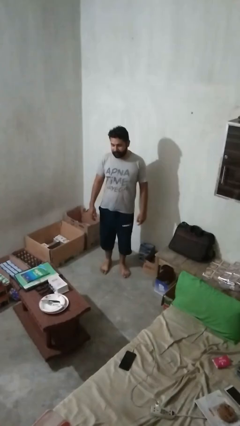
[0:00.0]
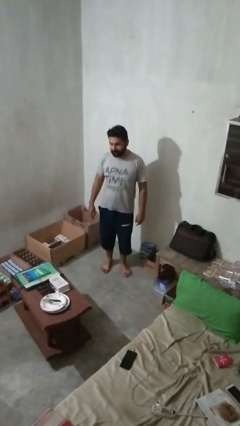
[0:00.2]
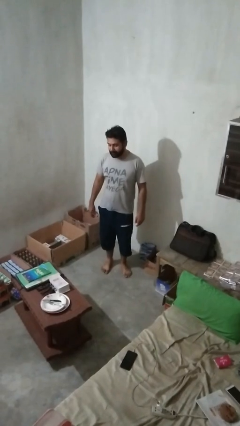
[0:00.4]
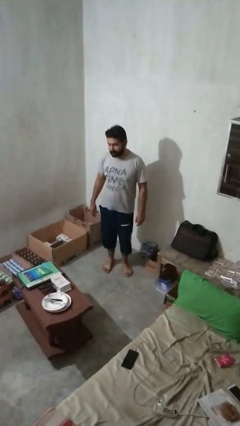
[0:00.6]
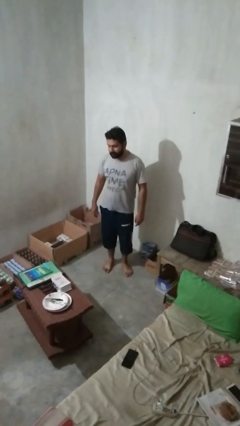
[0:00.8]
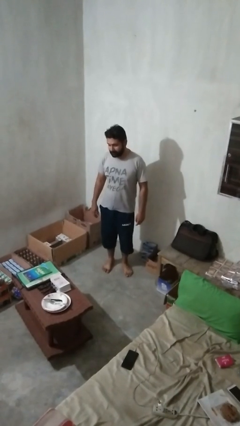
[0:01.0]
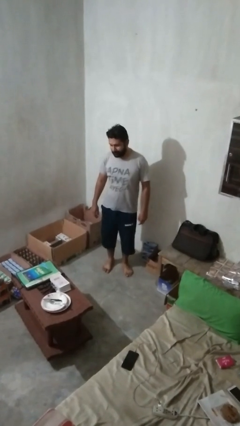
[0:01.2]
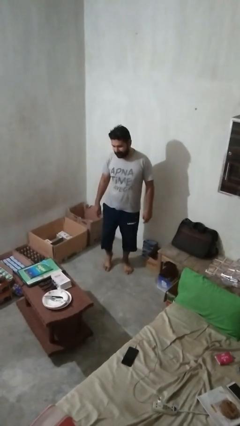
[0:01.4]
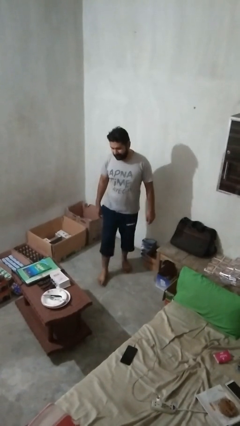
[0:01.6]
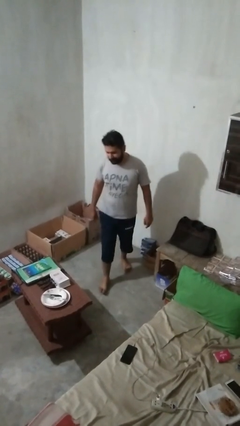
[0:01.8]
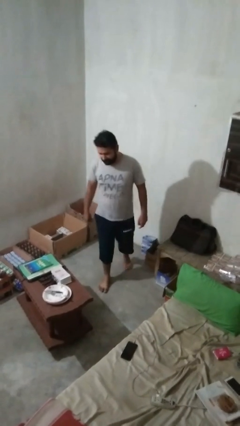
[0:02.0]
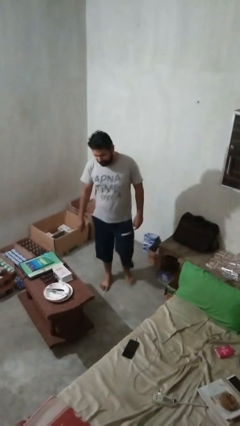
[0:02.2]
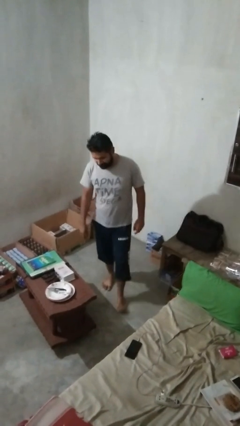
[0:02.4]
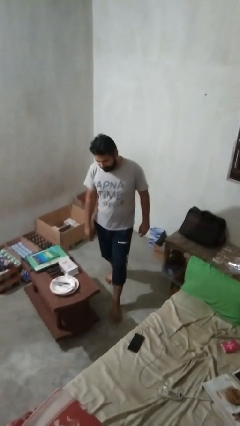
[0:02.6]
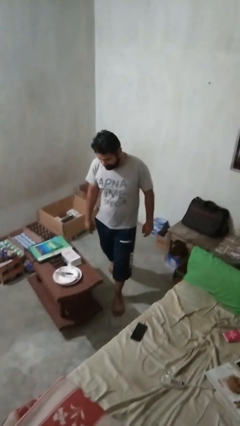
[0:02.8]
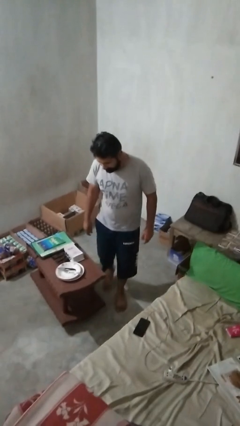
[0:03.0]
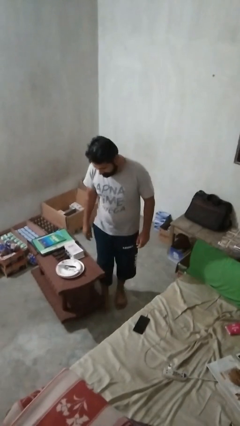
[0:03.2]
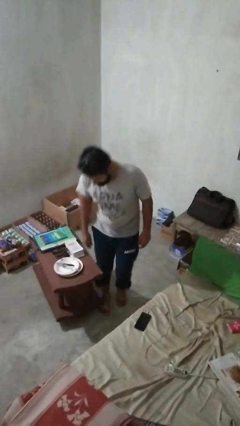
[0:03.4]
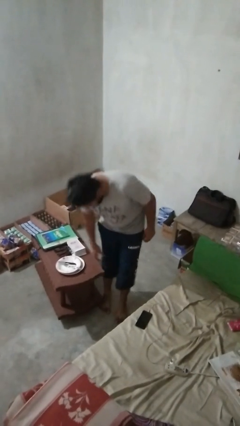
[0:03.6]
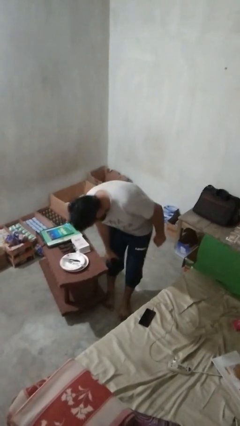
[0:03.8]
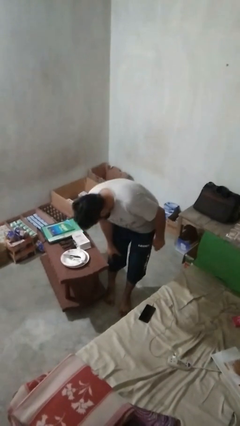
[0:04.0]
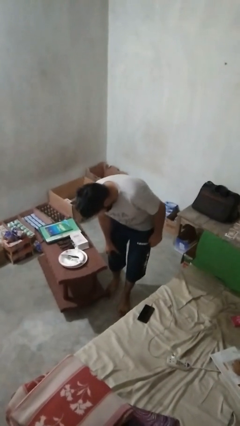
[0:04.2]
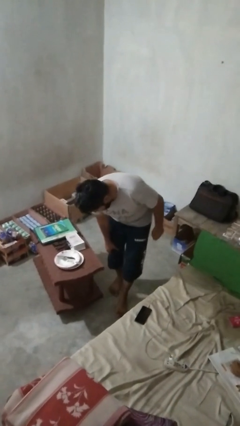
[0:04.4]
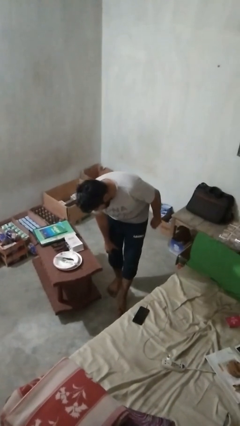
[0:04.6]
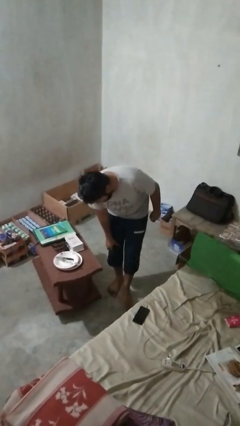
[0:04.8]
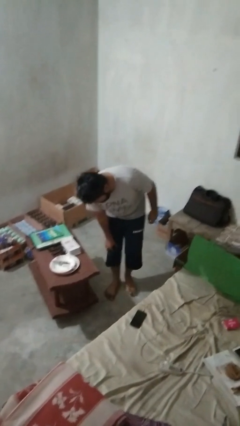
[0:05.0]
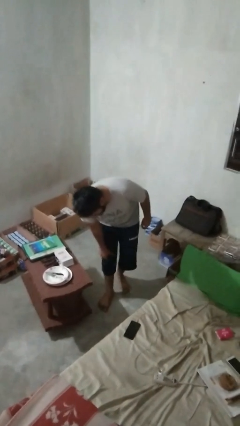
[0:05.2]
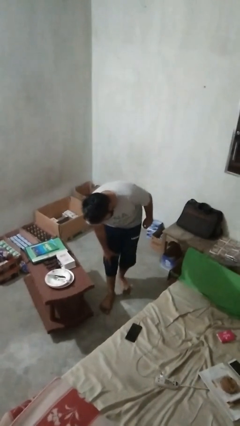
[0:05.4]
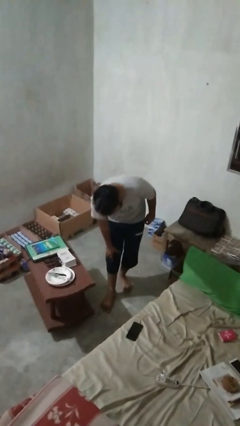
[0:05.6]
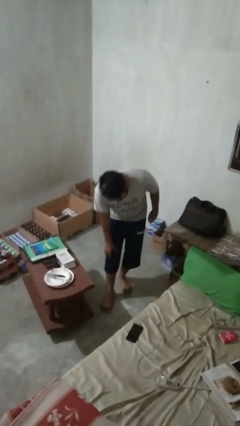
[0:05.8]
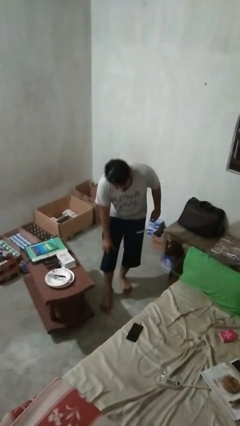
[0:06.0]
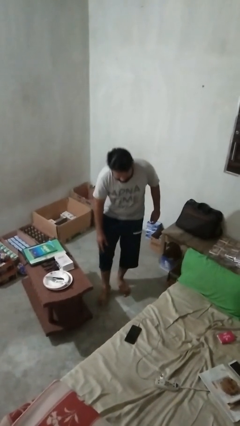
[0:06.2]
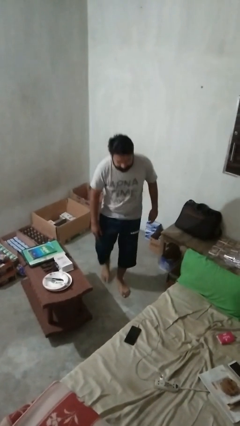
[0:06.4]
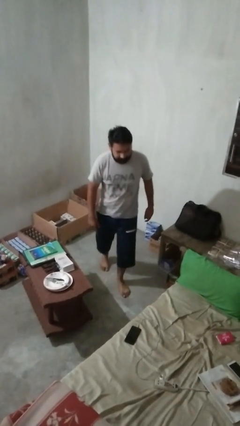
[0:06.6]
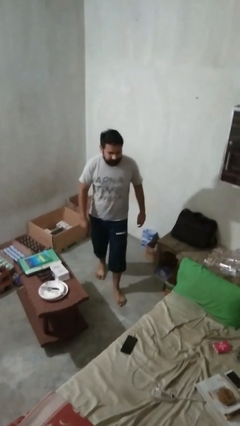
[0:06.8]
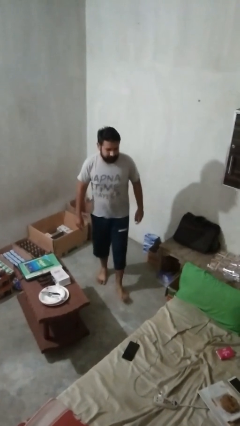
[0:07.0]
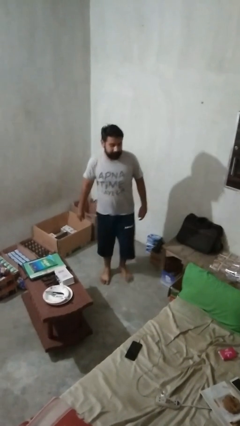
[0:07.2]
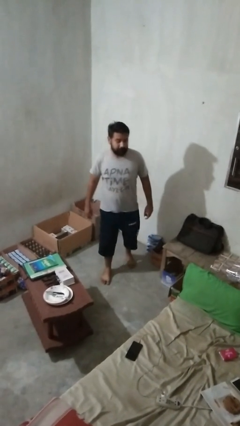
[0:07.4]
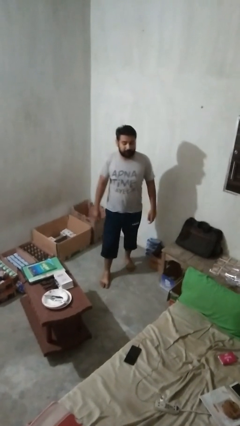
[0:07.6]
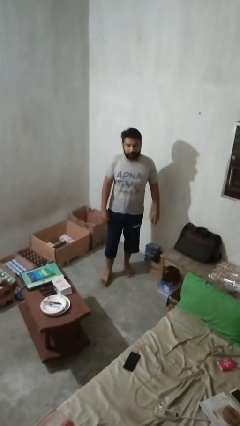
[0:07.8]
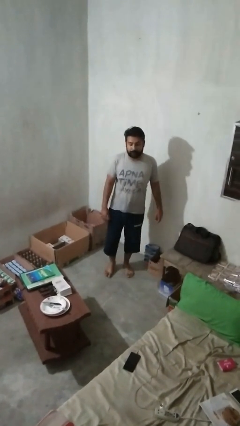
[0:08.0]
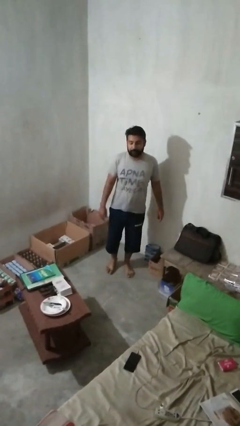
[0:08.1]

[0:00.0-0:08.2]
person bumps into table

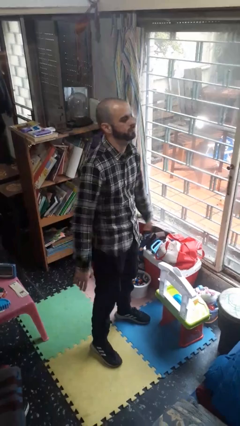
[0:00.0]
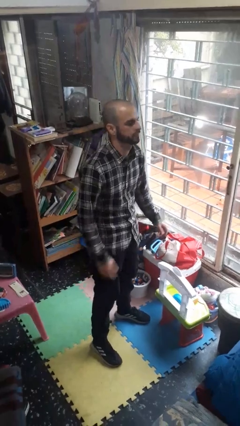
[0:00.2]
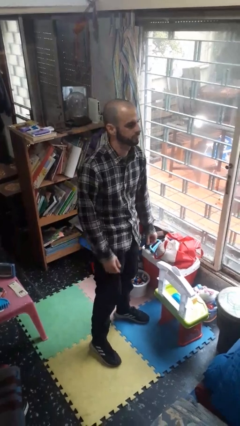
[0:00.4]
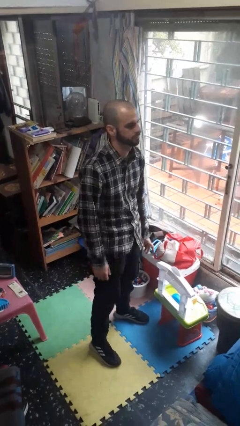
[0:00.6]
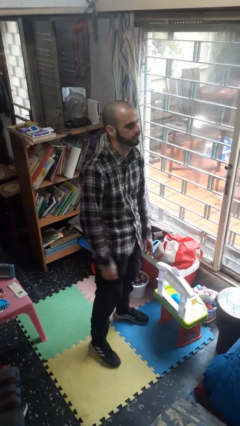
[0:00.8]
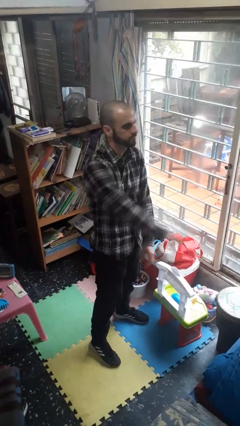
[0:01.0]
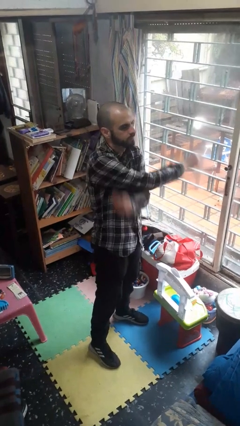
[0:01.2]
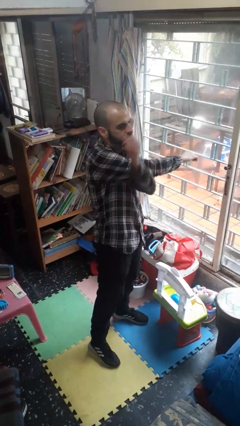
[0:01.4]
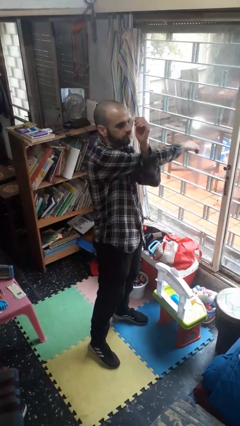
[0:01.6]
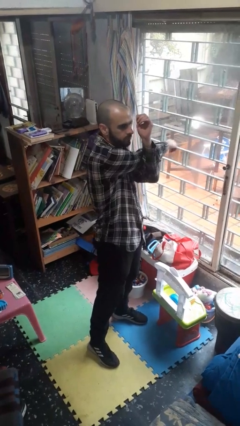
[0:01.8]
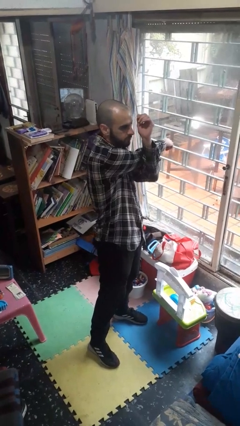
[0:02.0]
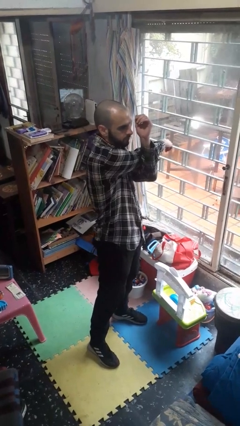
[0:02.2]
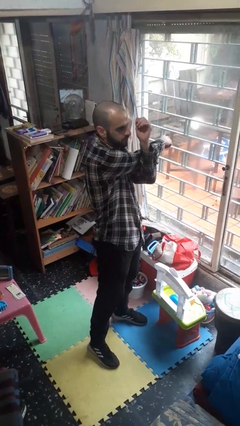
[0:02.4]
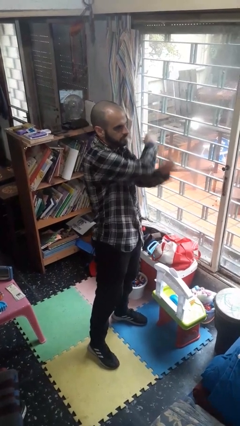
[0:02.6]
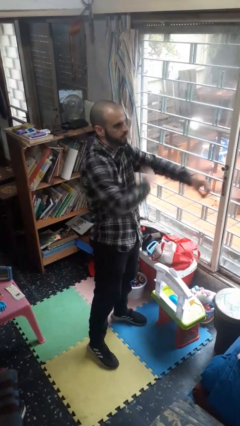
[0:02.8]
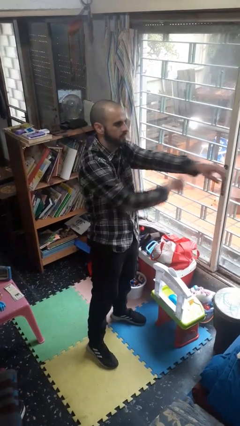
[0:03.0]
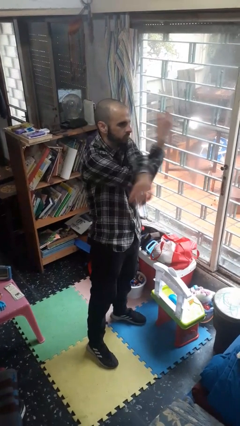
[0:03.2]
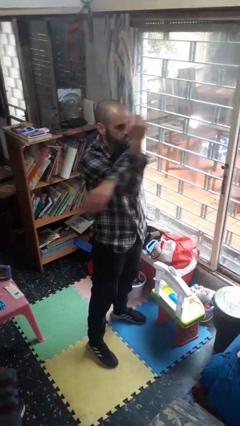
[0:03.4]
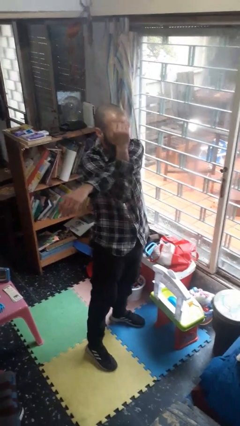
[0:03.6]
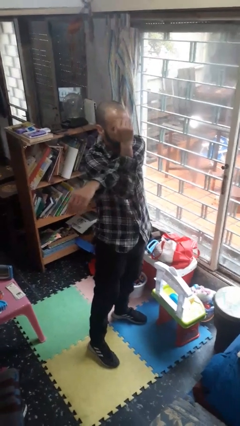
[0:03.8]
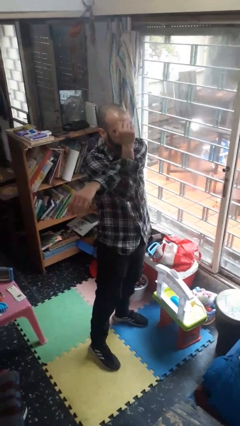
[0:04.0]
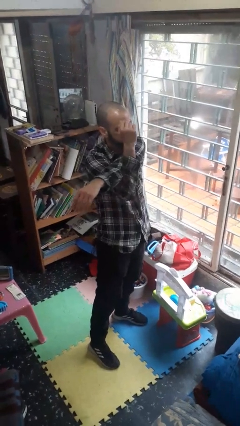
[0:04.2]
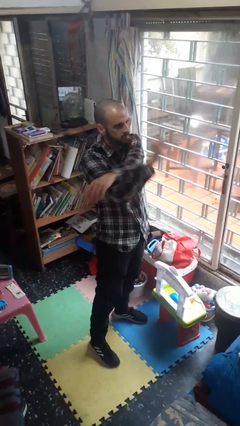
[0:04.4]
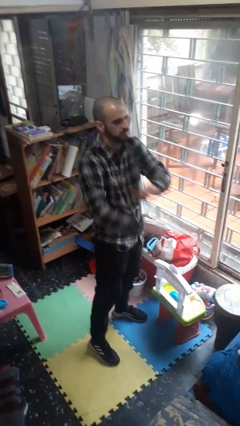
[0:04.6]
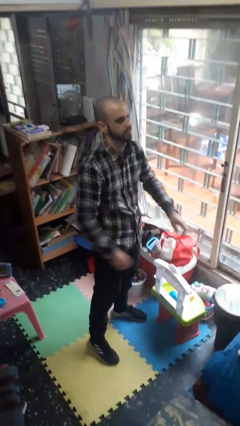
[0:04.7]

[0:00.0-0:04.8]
person stretches arms to side

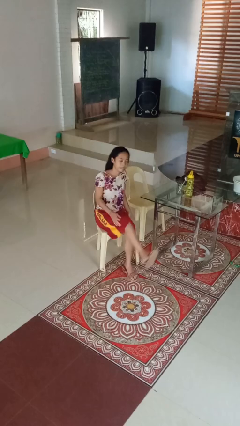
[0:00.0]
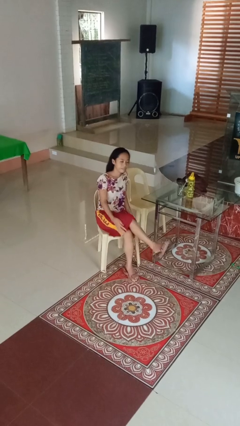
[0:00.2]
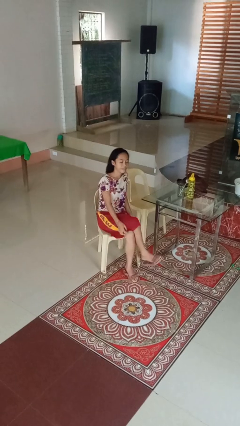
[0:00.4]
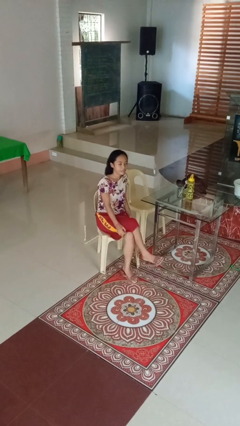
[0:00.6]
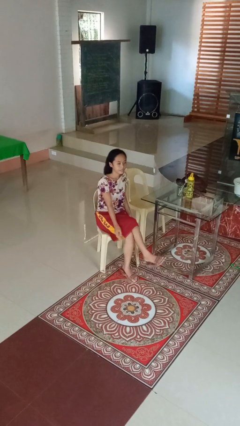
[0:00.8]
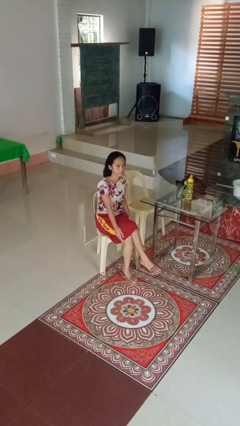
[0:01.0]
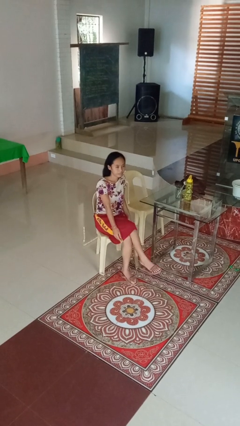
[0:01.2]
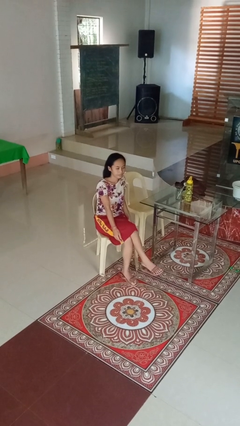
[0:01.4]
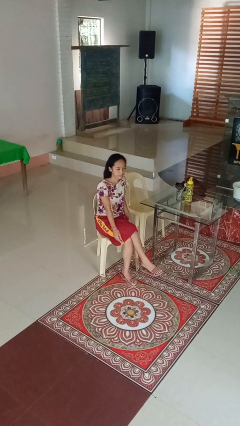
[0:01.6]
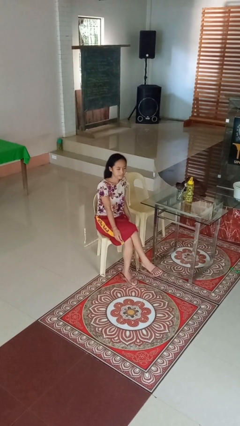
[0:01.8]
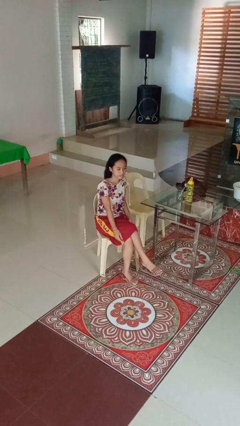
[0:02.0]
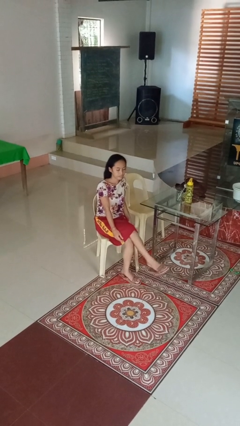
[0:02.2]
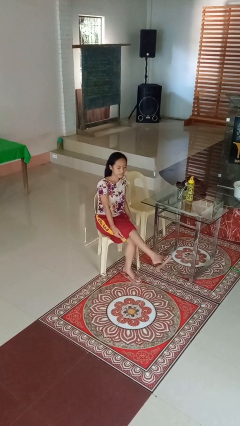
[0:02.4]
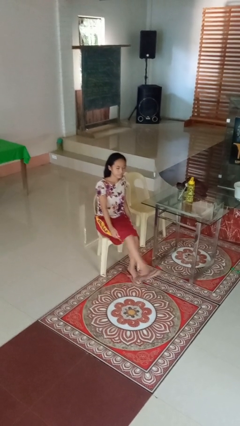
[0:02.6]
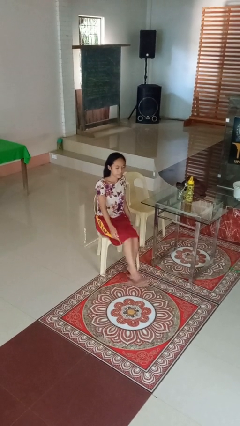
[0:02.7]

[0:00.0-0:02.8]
person crosses legs

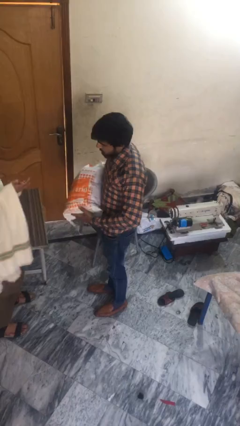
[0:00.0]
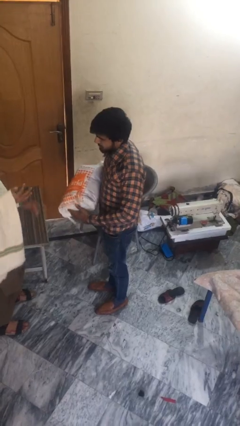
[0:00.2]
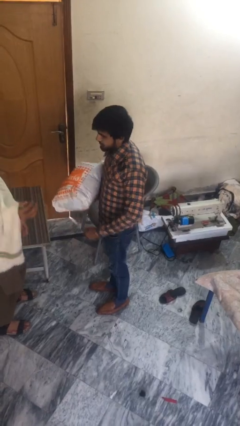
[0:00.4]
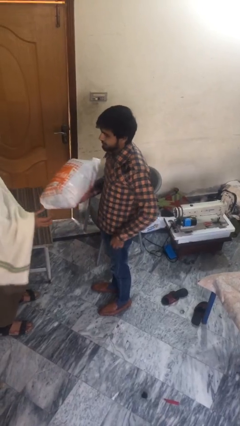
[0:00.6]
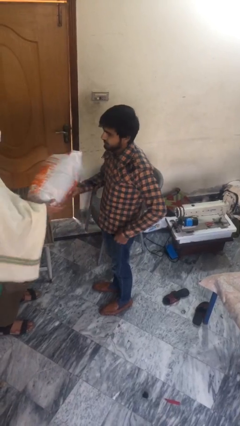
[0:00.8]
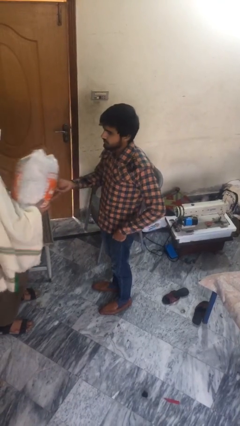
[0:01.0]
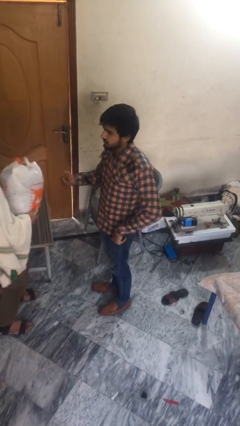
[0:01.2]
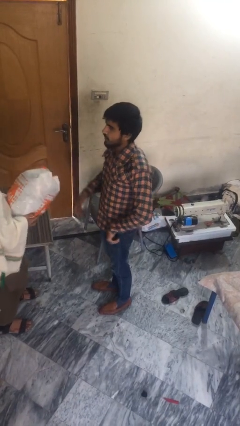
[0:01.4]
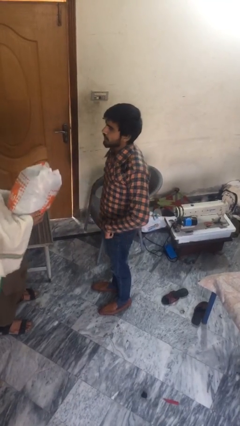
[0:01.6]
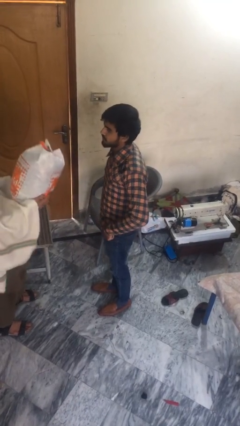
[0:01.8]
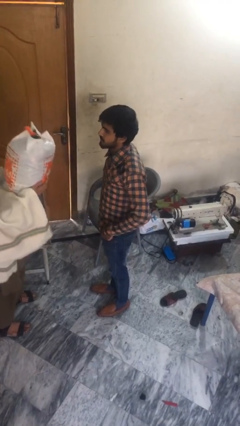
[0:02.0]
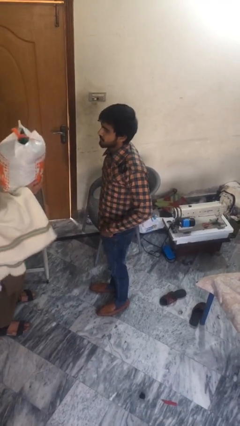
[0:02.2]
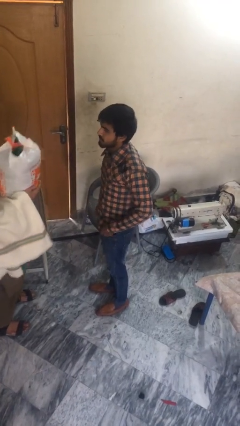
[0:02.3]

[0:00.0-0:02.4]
person transfers object to person
